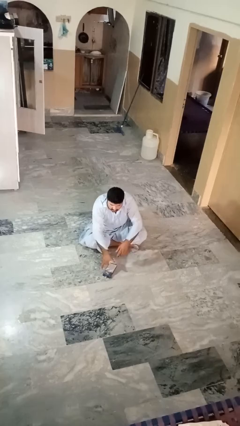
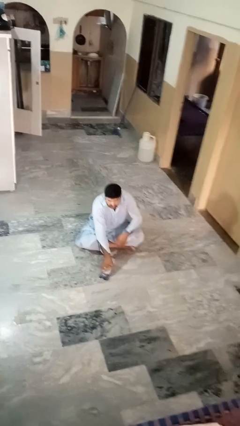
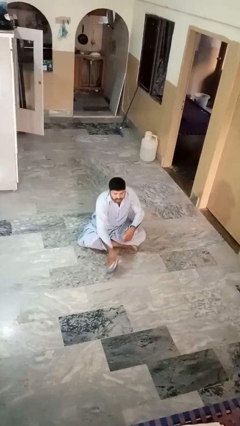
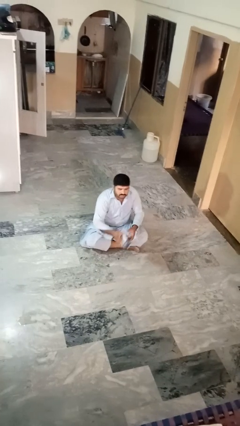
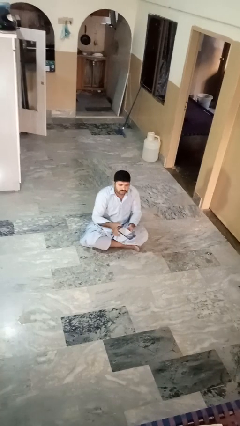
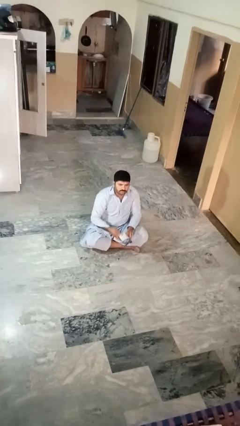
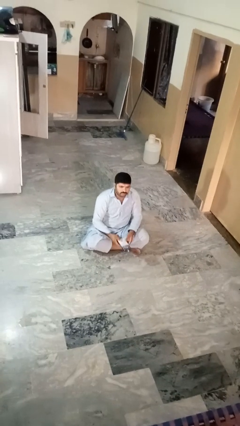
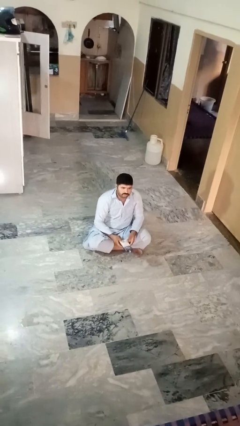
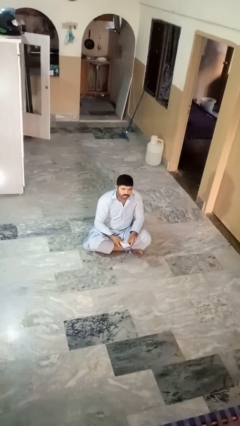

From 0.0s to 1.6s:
person picks up object from floor

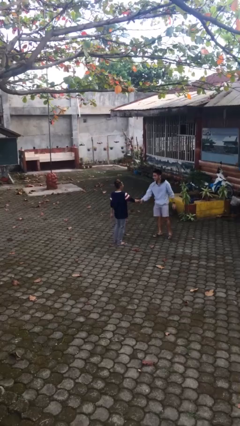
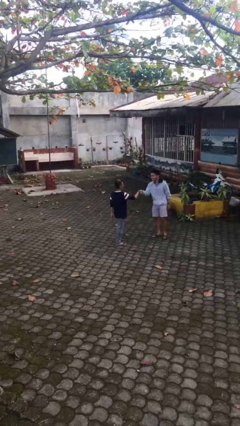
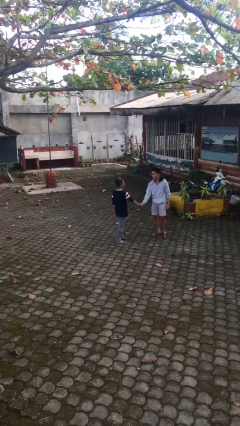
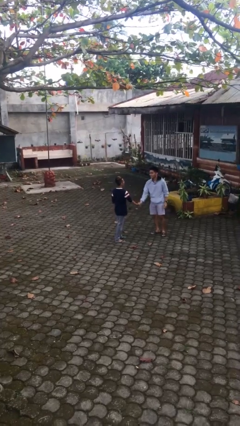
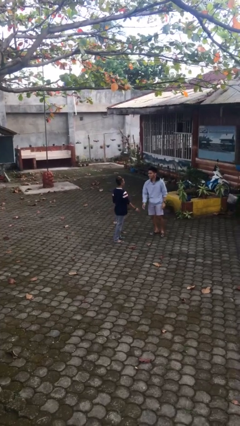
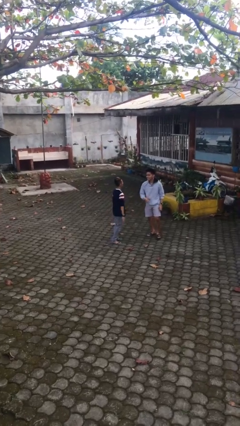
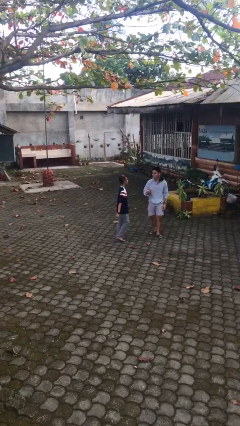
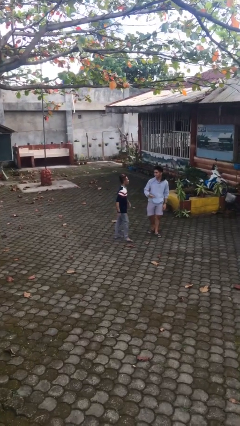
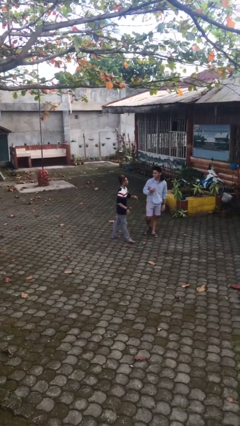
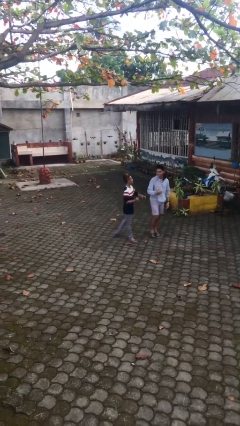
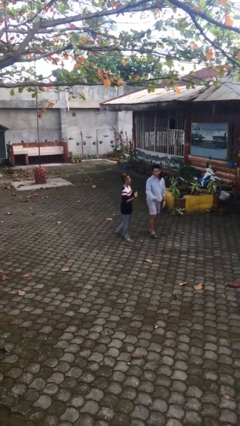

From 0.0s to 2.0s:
person shakes hand

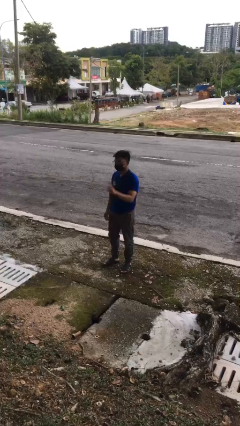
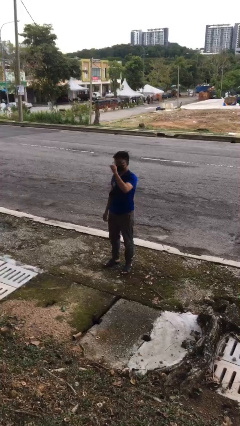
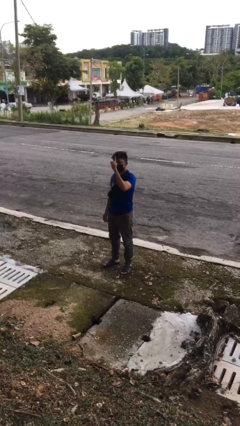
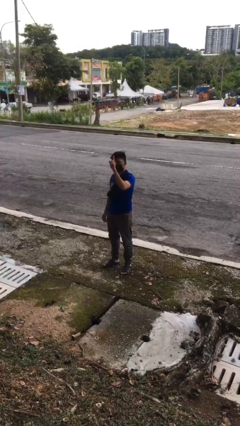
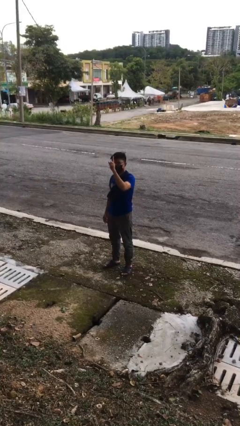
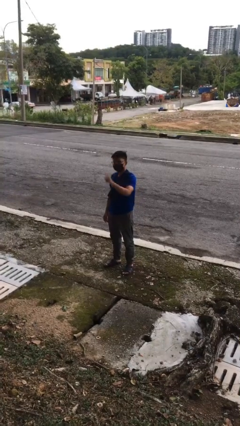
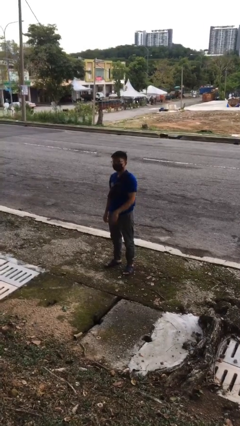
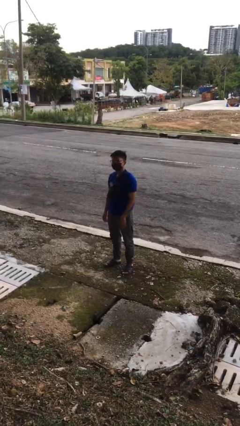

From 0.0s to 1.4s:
person gestures number one

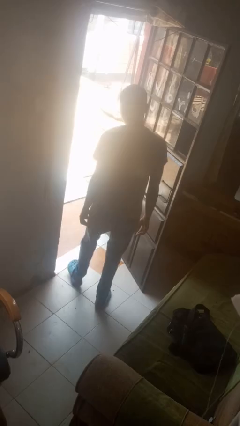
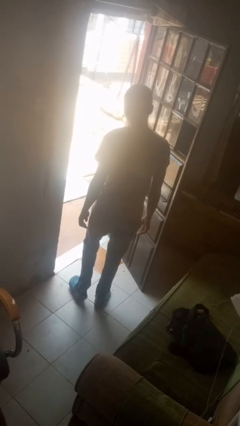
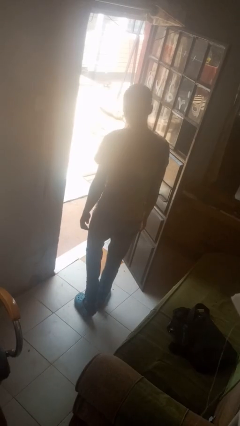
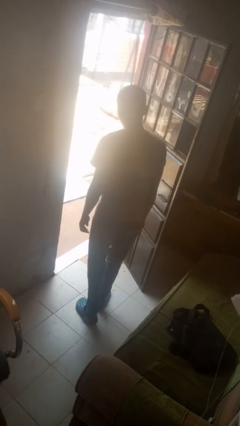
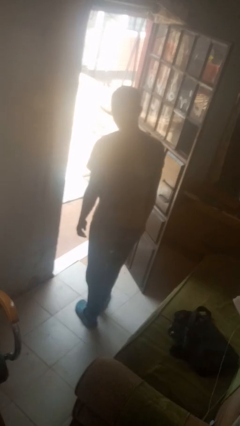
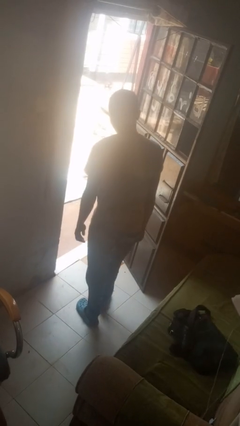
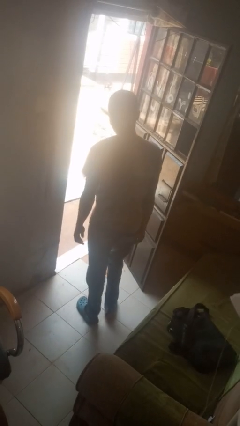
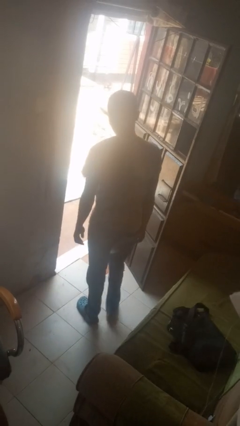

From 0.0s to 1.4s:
person bumps into wall

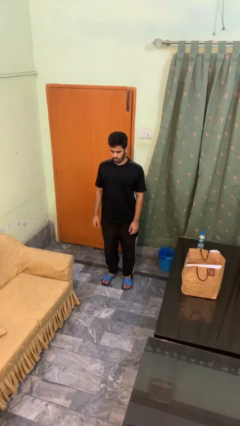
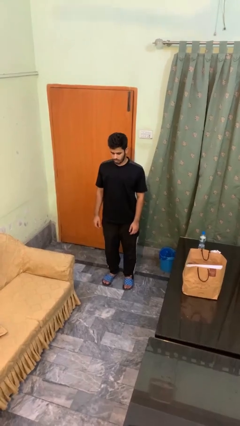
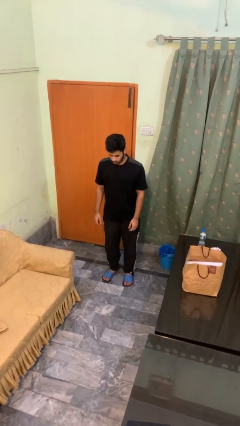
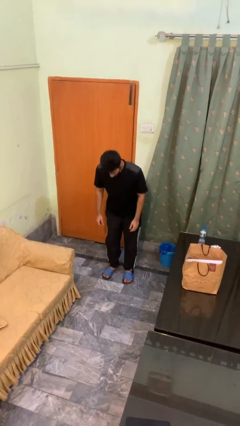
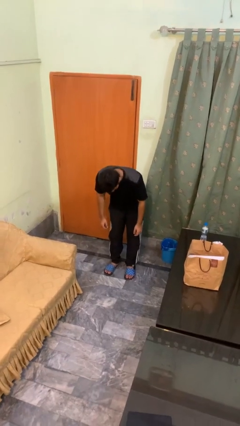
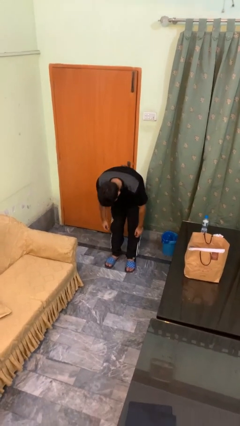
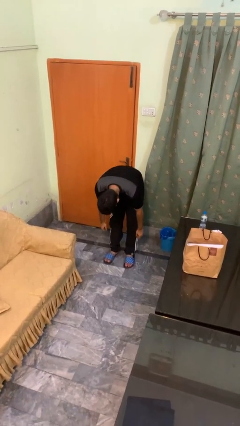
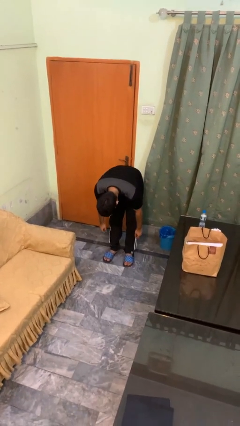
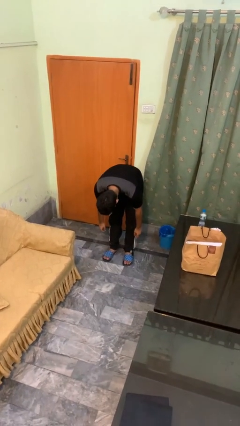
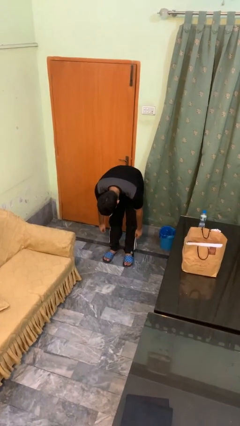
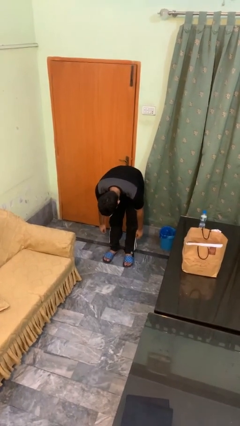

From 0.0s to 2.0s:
person bows

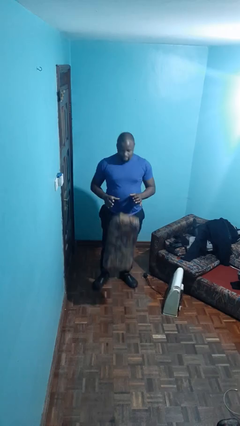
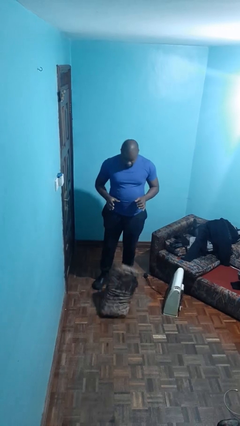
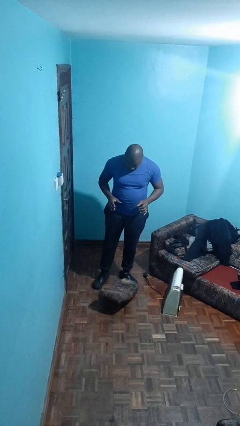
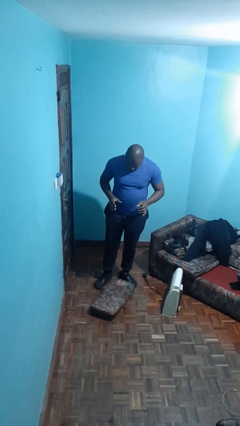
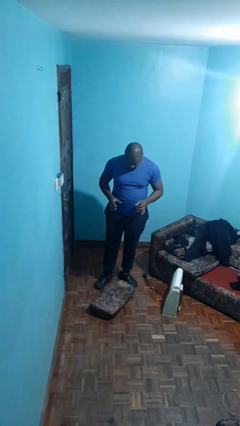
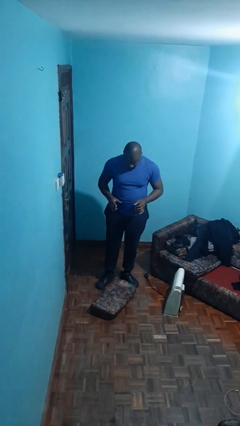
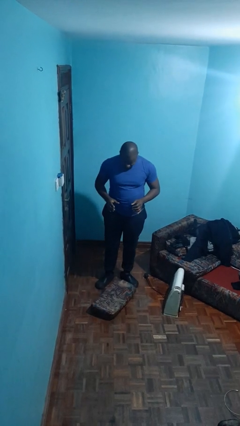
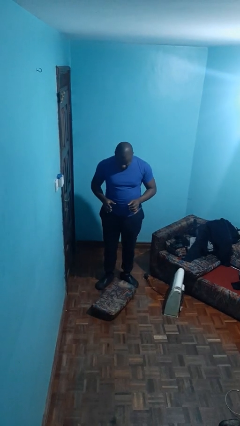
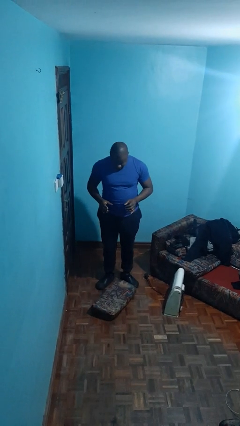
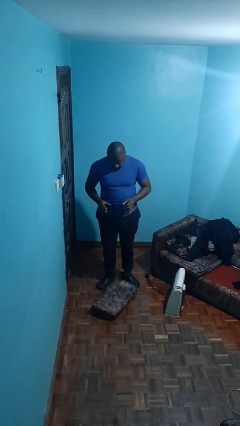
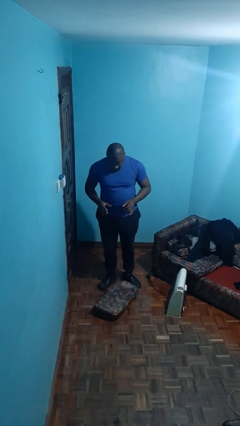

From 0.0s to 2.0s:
person drops object

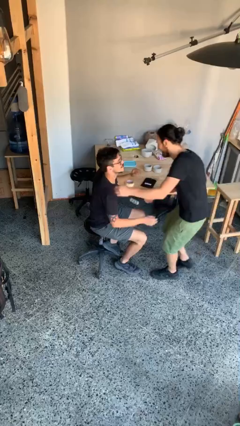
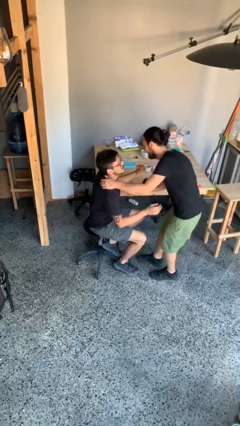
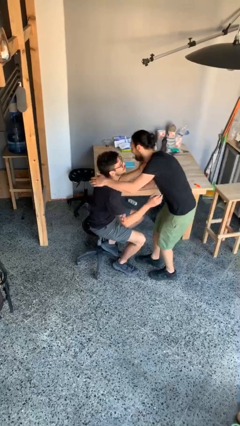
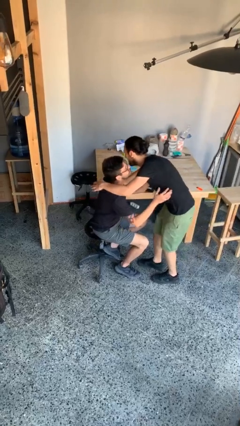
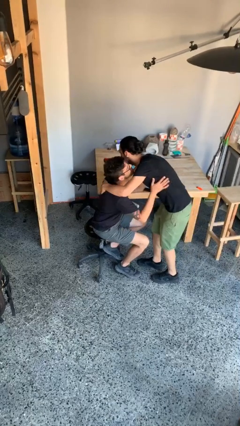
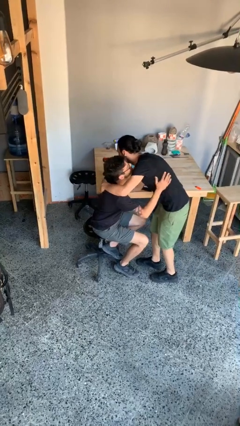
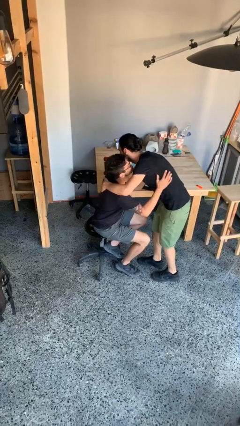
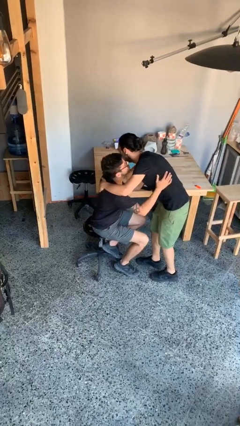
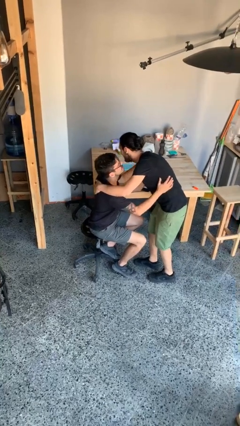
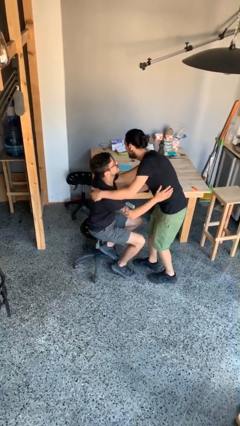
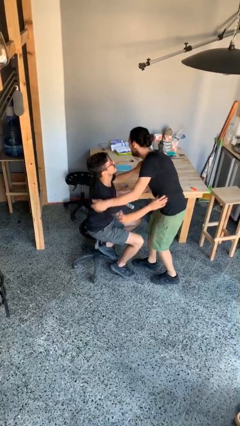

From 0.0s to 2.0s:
person embraces person

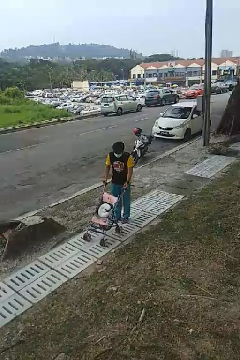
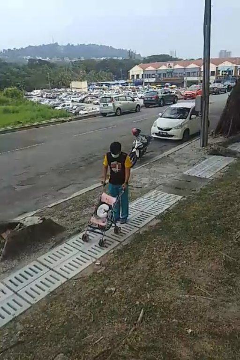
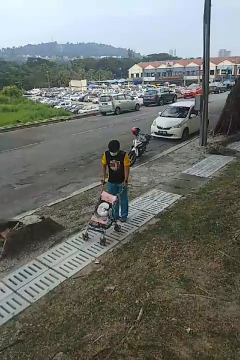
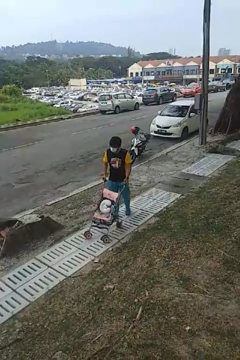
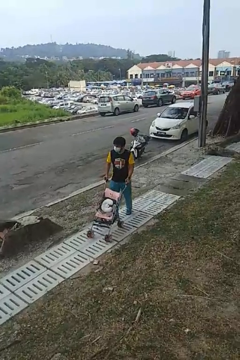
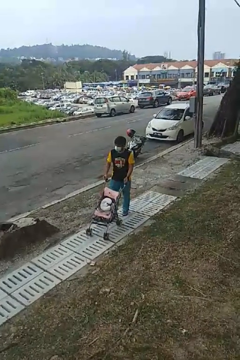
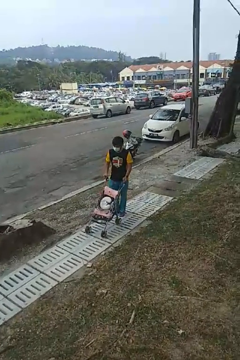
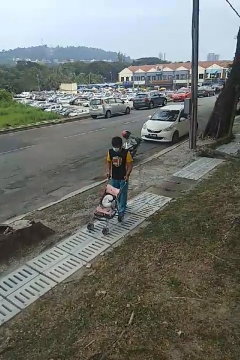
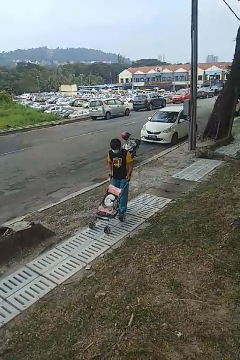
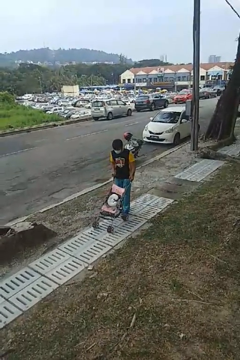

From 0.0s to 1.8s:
person pulls wheeled cart

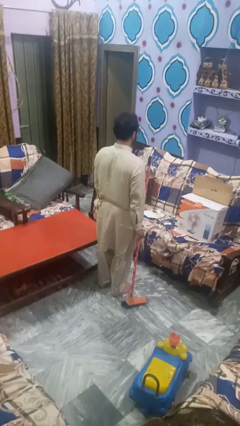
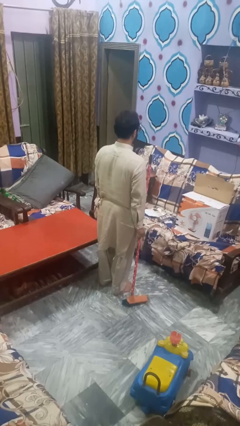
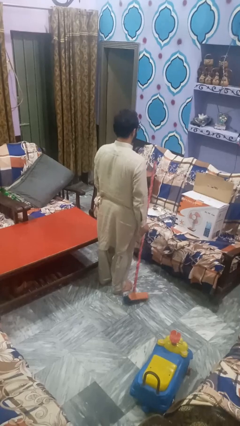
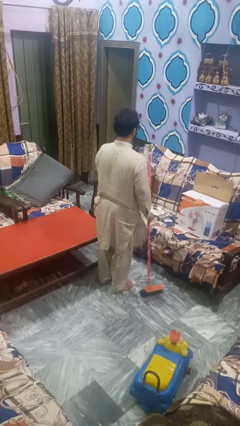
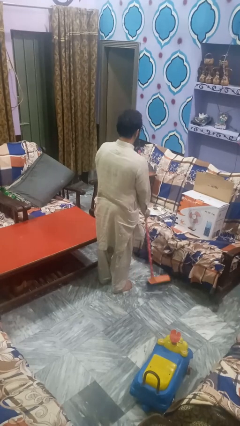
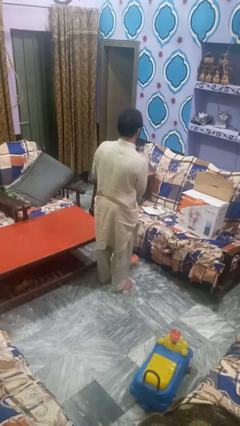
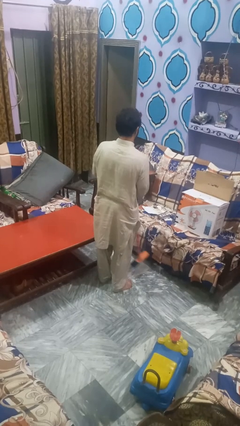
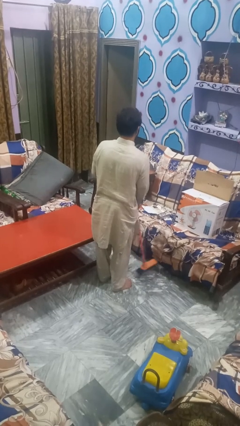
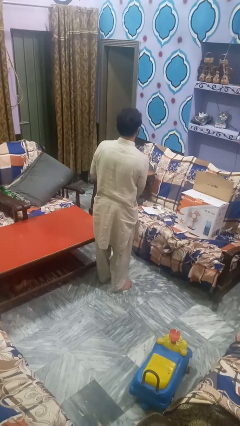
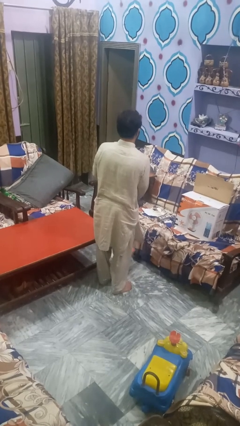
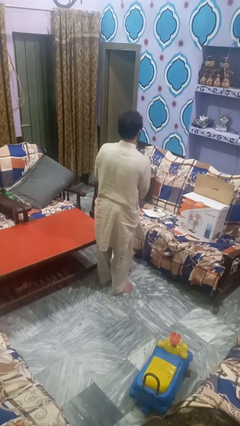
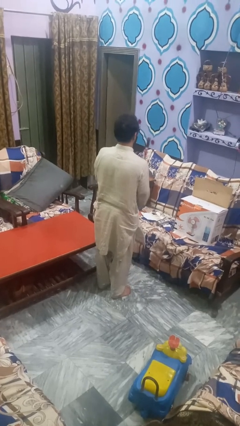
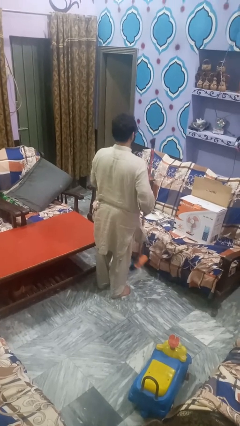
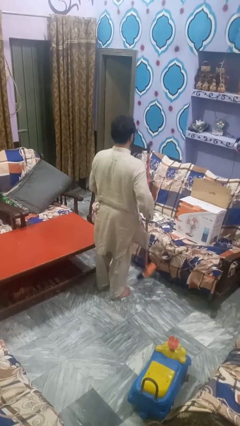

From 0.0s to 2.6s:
person mops

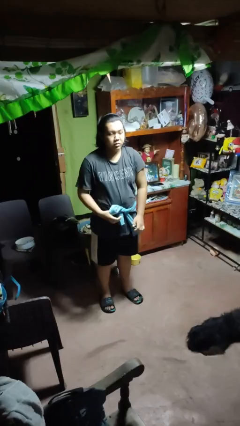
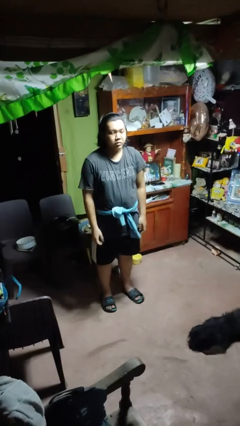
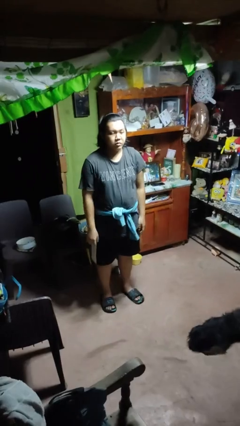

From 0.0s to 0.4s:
person ties jacket around waist
